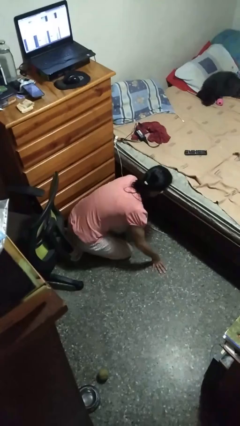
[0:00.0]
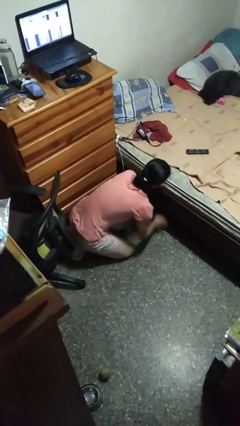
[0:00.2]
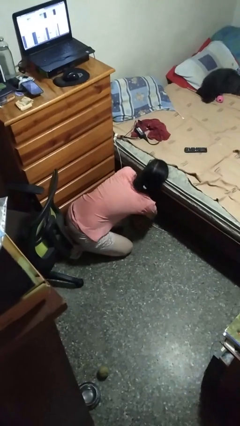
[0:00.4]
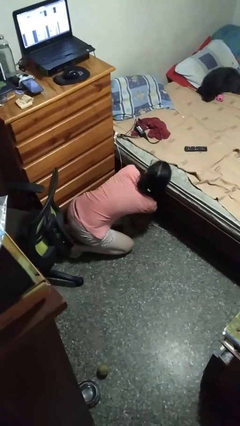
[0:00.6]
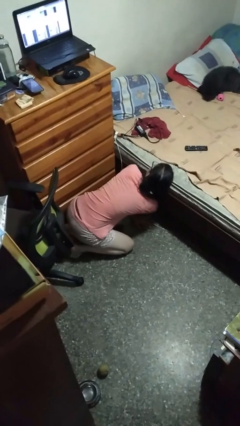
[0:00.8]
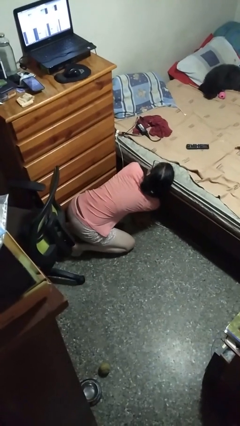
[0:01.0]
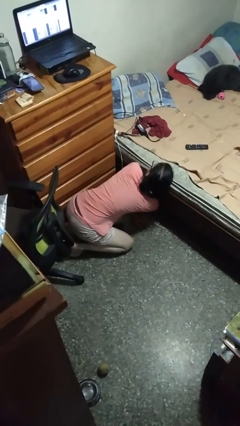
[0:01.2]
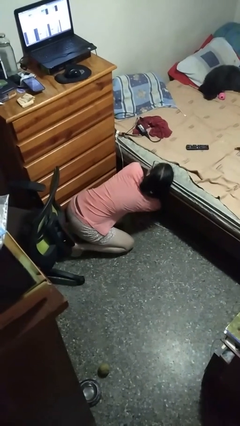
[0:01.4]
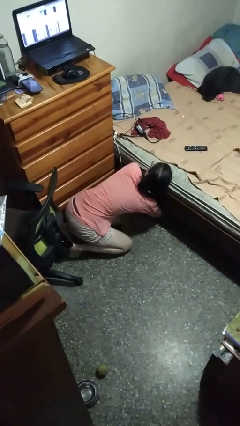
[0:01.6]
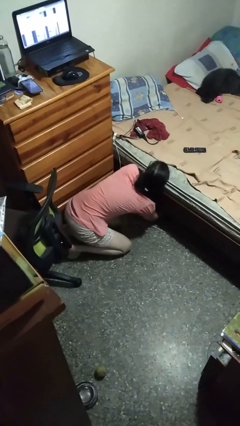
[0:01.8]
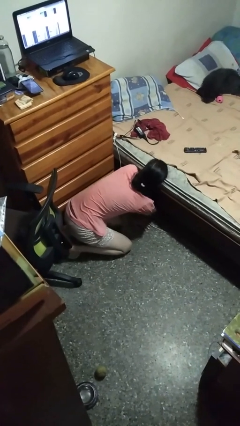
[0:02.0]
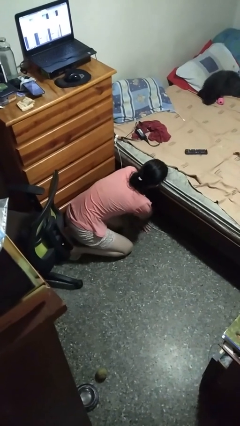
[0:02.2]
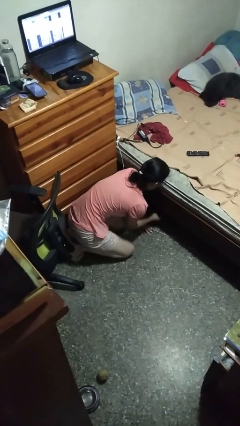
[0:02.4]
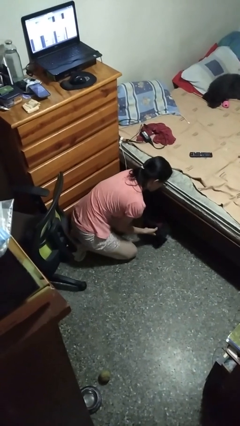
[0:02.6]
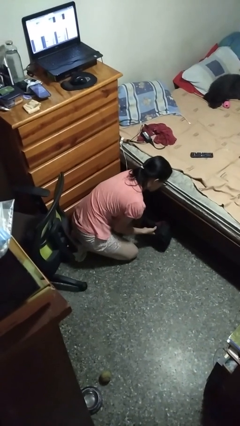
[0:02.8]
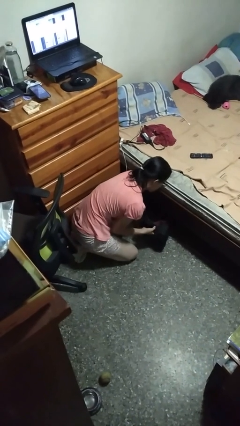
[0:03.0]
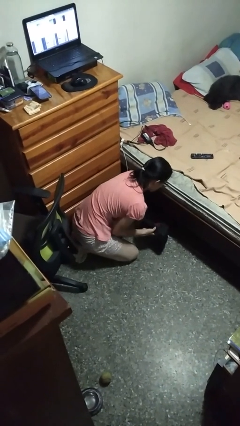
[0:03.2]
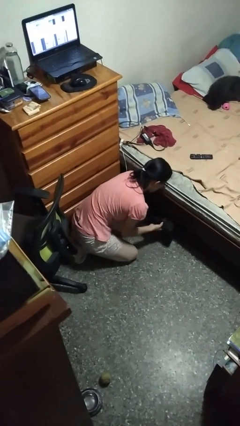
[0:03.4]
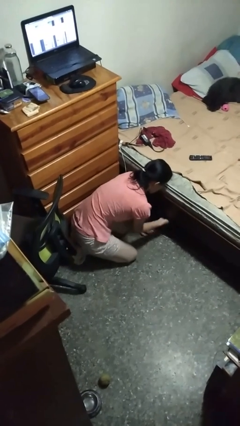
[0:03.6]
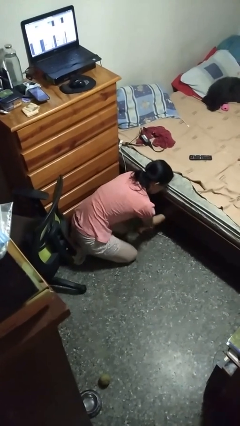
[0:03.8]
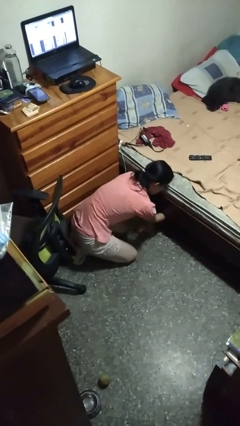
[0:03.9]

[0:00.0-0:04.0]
person searches under bed

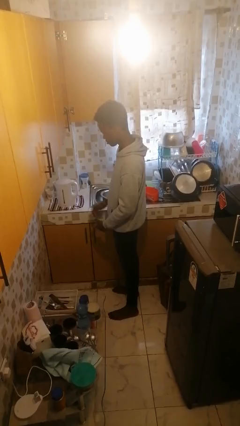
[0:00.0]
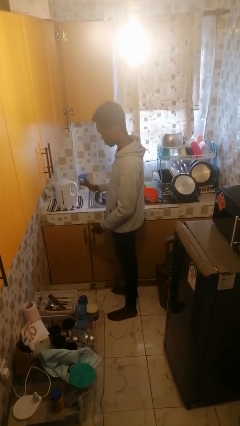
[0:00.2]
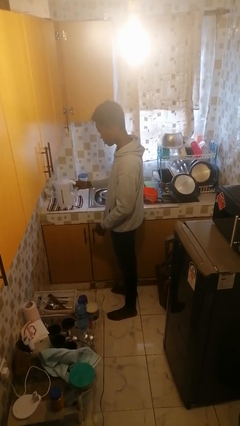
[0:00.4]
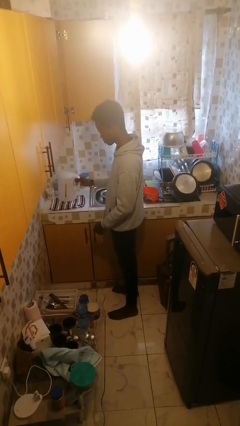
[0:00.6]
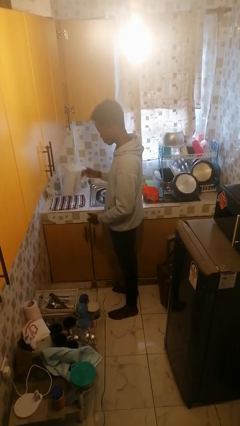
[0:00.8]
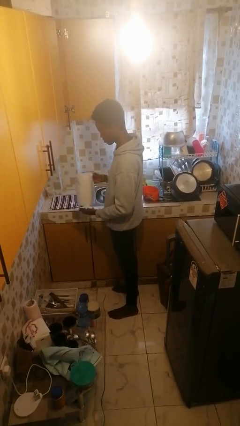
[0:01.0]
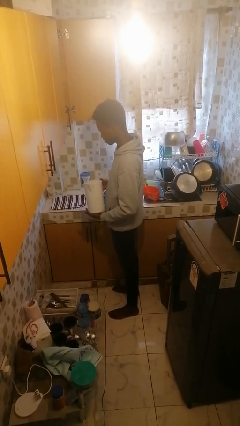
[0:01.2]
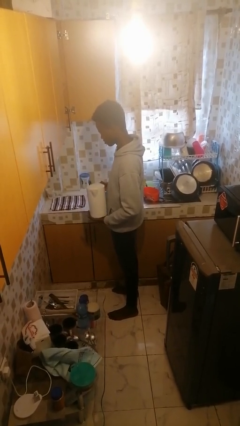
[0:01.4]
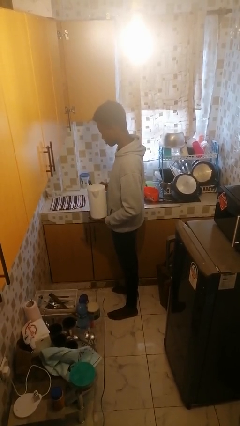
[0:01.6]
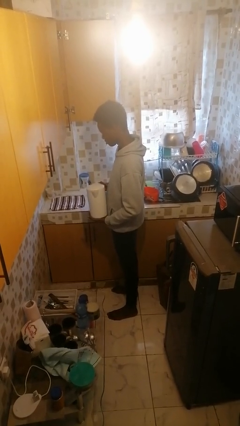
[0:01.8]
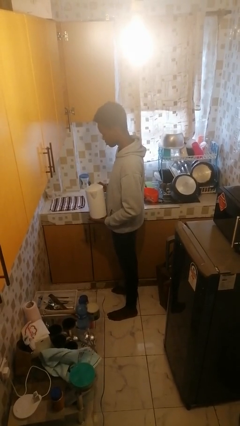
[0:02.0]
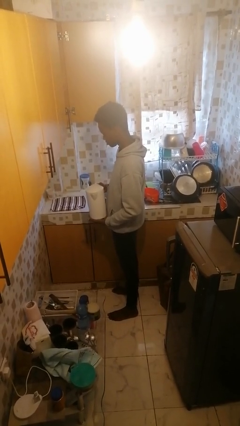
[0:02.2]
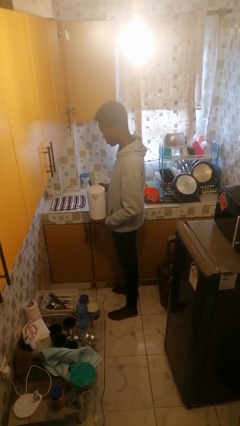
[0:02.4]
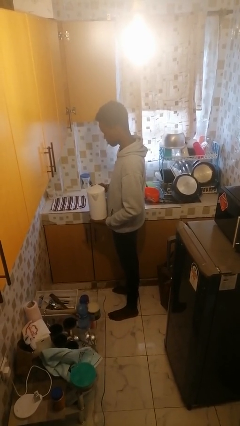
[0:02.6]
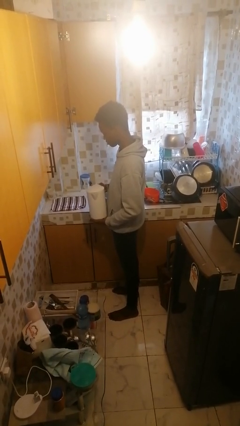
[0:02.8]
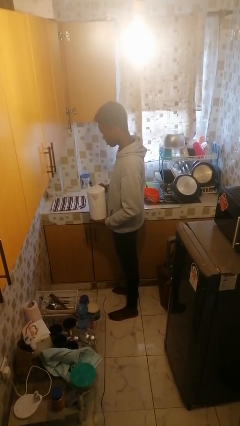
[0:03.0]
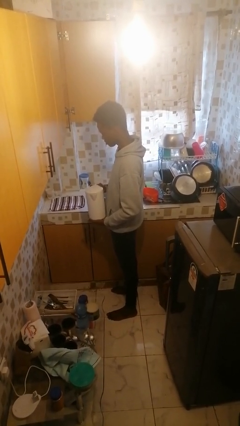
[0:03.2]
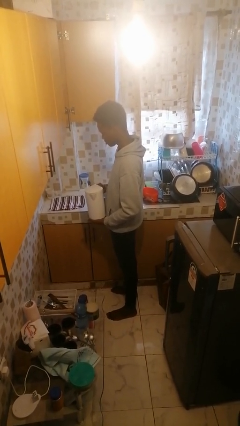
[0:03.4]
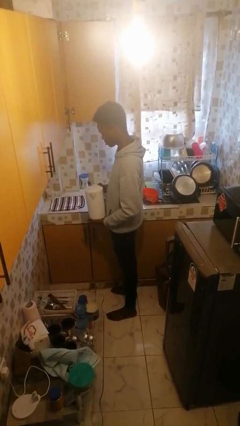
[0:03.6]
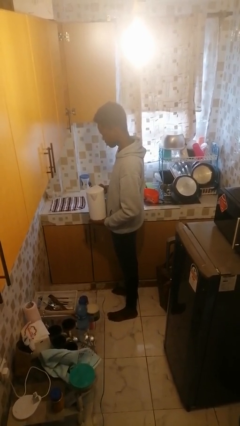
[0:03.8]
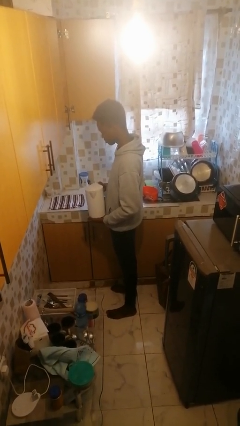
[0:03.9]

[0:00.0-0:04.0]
person picks up object from countertop

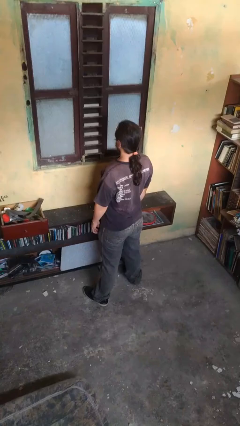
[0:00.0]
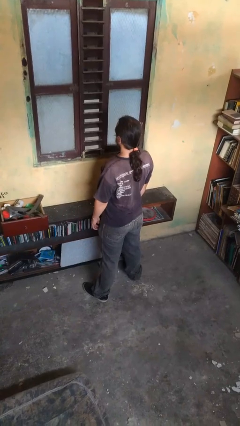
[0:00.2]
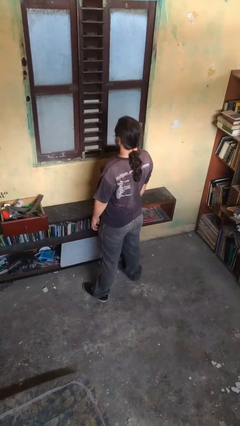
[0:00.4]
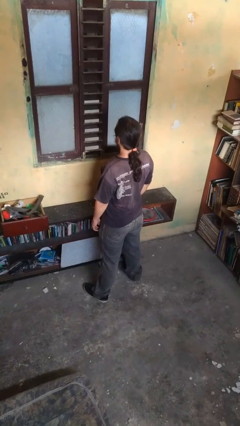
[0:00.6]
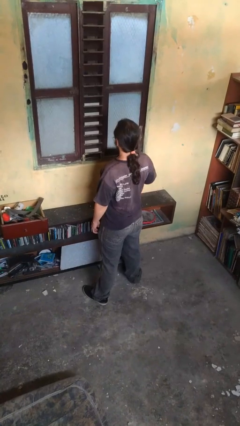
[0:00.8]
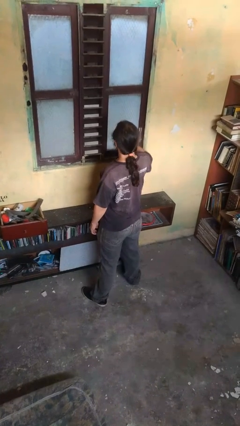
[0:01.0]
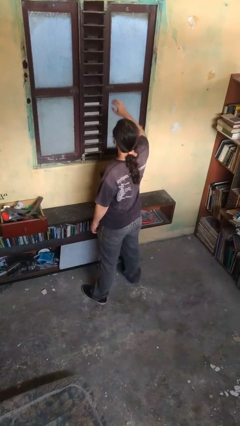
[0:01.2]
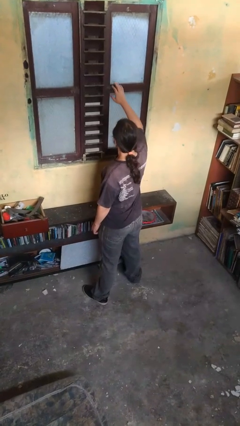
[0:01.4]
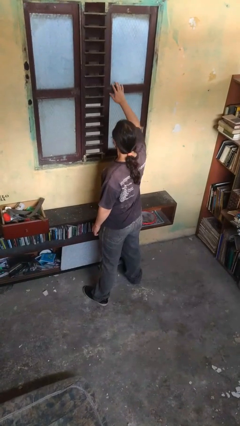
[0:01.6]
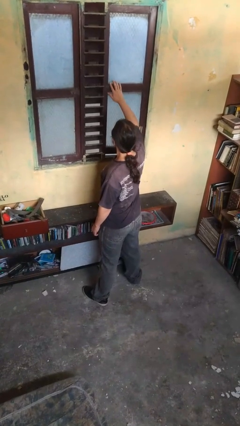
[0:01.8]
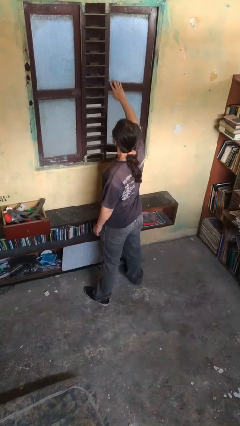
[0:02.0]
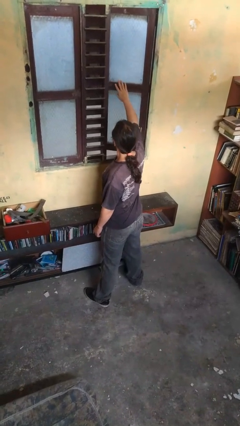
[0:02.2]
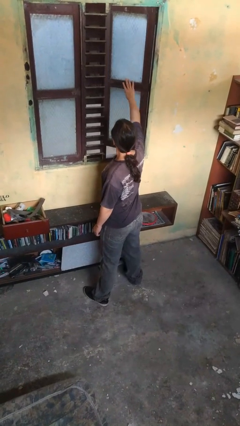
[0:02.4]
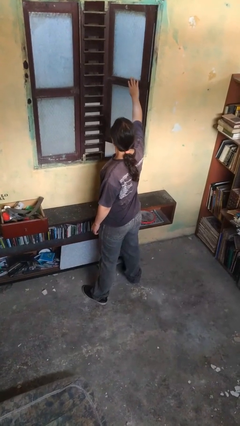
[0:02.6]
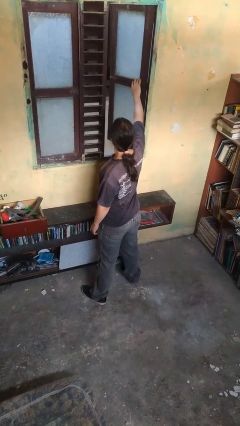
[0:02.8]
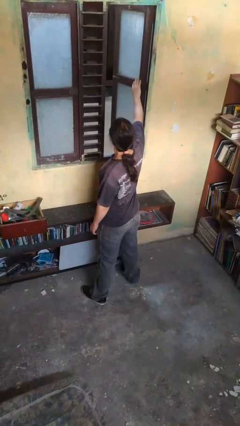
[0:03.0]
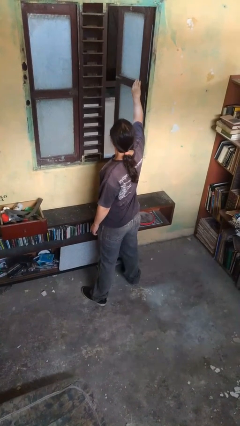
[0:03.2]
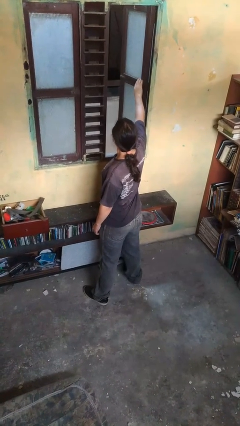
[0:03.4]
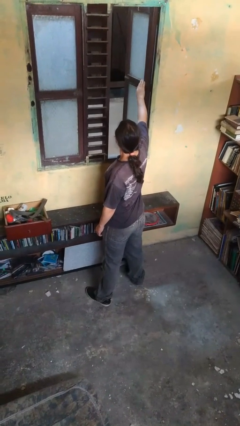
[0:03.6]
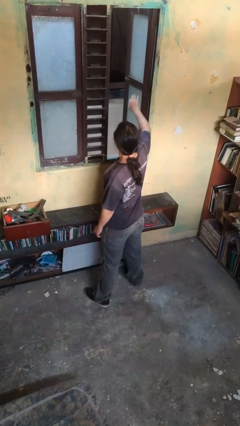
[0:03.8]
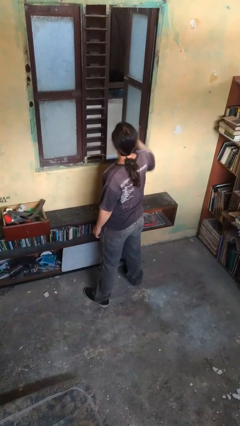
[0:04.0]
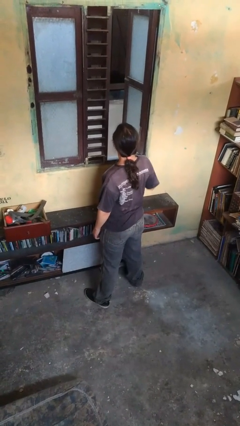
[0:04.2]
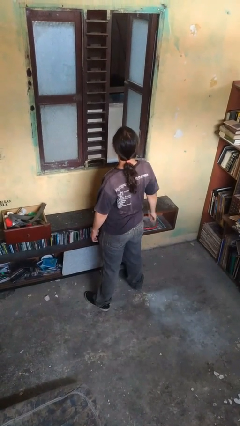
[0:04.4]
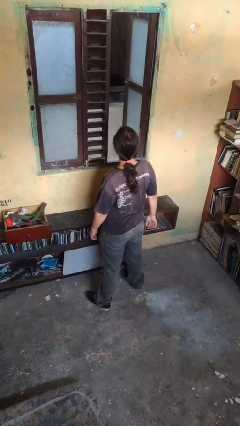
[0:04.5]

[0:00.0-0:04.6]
person opens home window

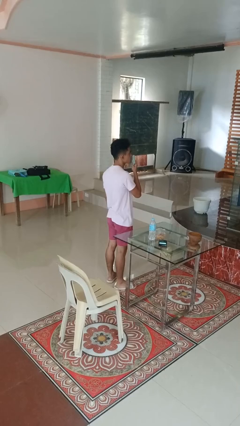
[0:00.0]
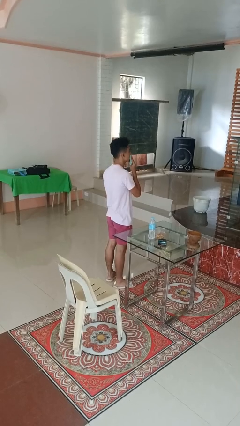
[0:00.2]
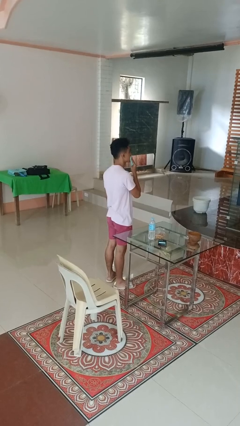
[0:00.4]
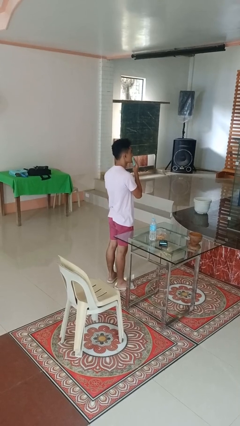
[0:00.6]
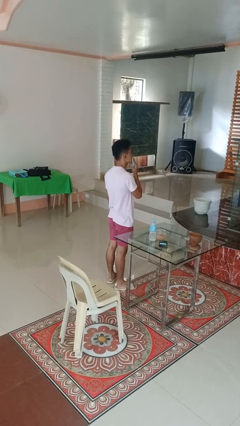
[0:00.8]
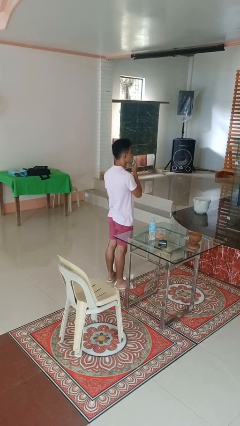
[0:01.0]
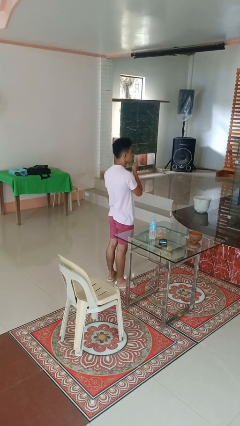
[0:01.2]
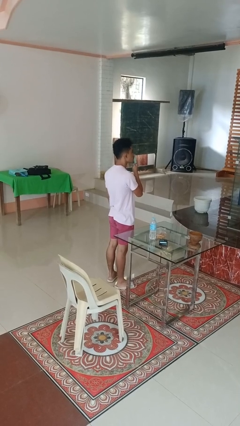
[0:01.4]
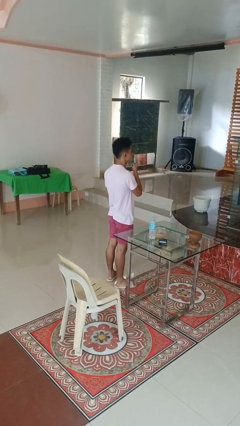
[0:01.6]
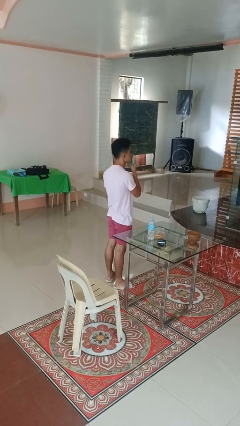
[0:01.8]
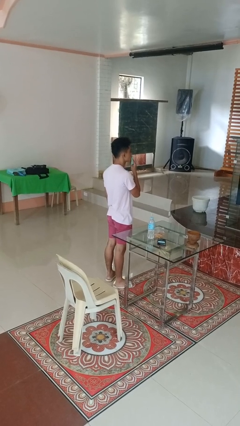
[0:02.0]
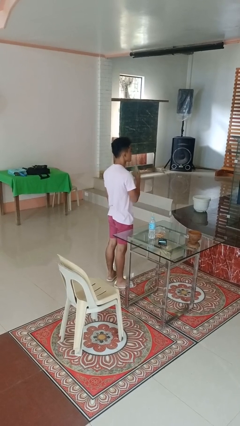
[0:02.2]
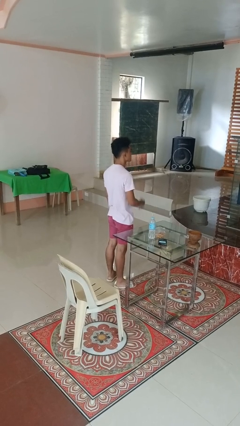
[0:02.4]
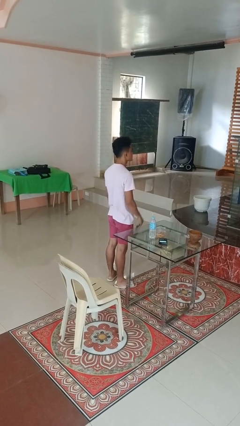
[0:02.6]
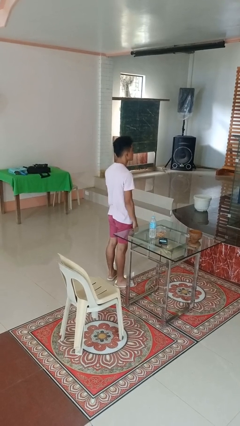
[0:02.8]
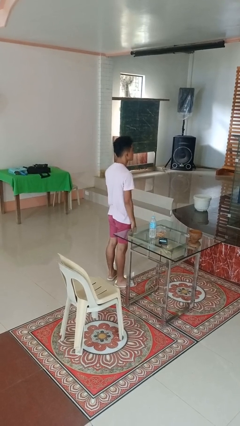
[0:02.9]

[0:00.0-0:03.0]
person wipes mouth with napkin

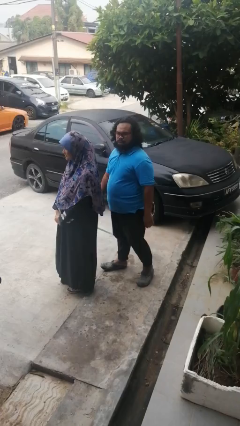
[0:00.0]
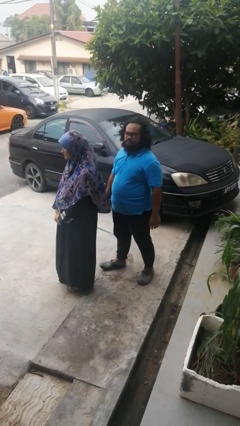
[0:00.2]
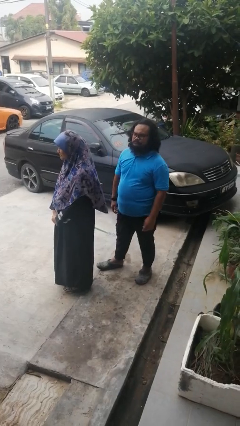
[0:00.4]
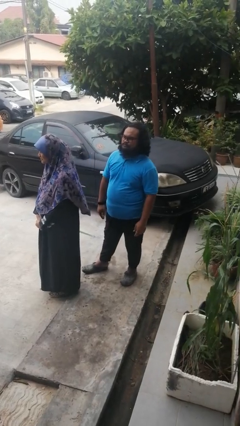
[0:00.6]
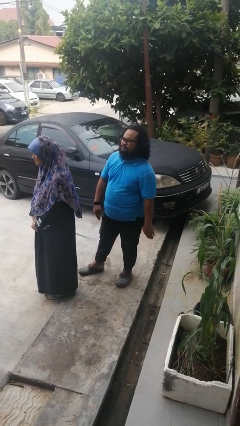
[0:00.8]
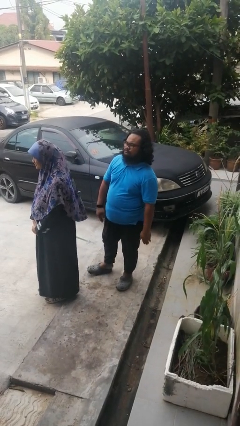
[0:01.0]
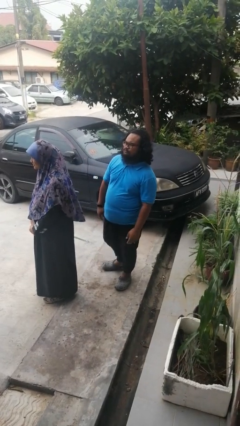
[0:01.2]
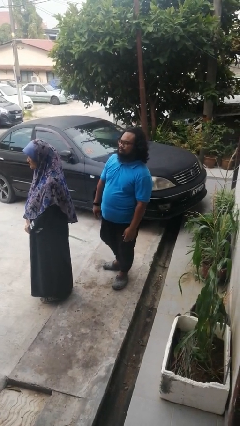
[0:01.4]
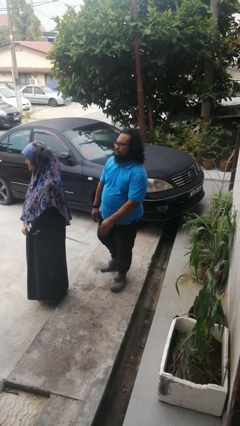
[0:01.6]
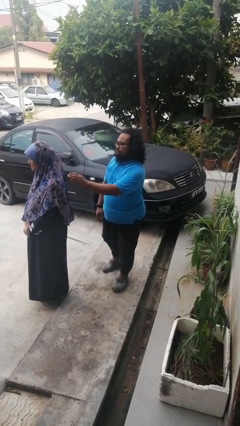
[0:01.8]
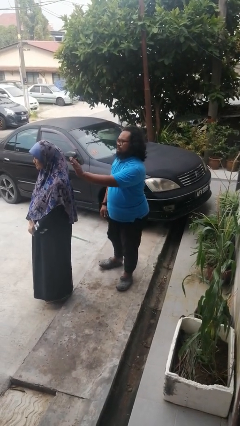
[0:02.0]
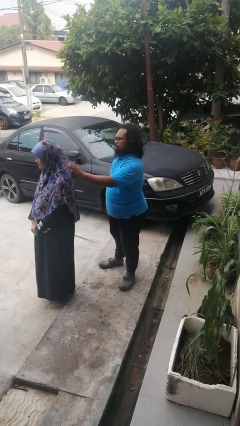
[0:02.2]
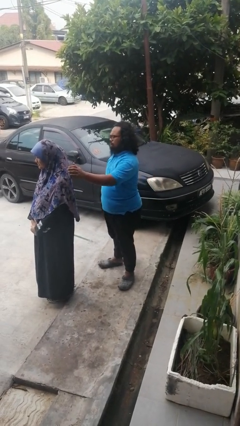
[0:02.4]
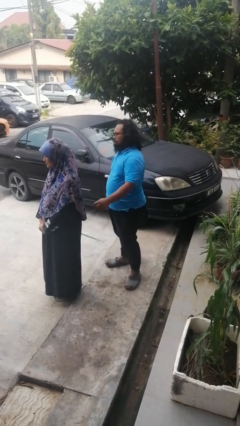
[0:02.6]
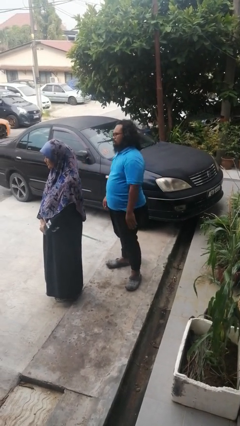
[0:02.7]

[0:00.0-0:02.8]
person touches back of person
